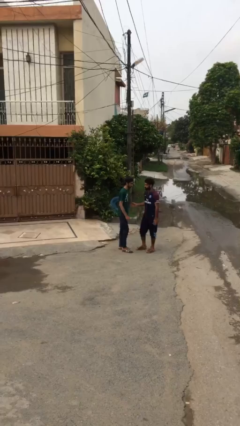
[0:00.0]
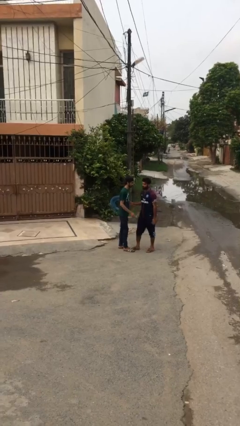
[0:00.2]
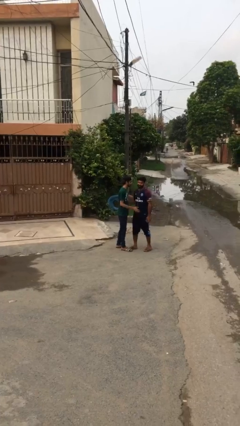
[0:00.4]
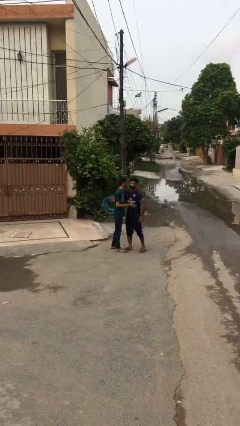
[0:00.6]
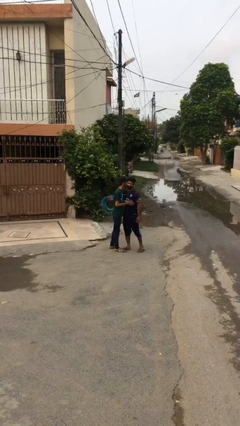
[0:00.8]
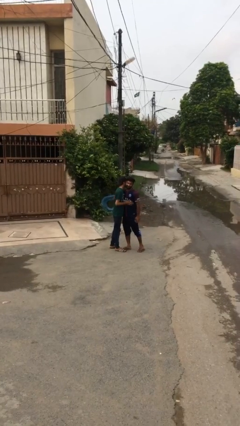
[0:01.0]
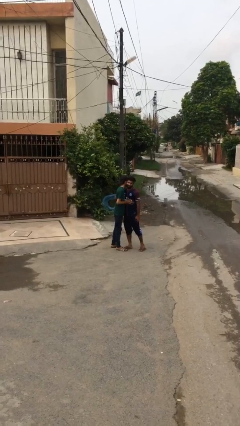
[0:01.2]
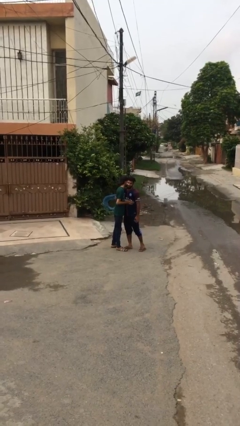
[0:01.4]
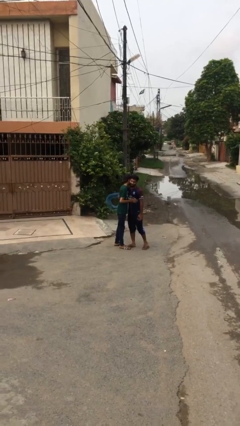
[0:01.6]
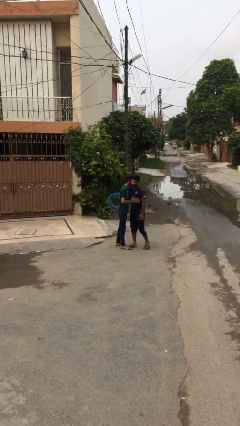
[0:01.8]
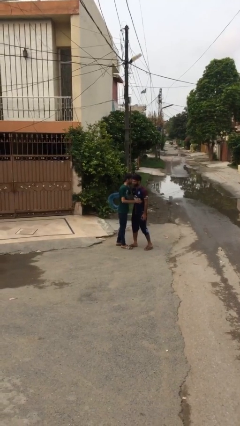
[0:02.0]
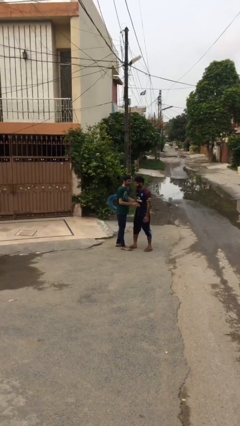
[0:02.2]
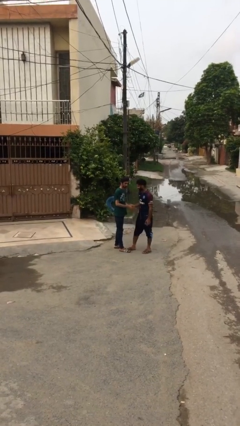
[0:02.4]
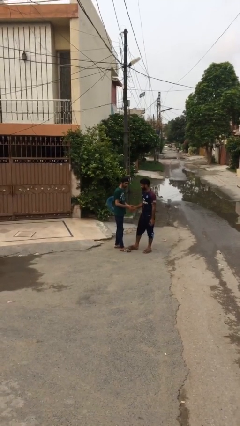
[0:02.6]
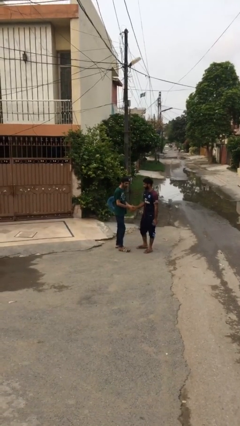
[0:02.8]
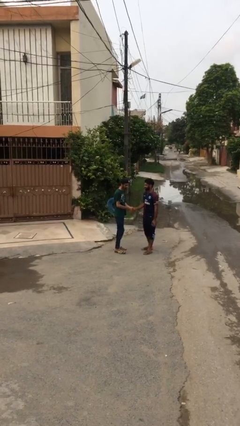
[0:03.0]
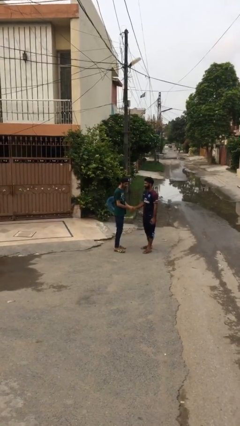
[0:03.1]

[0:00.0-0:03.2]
person embraces person

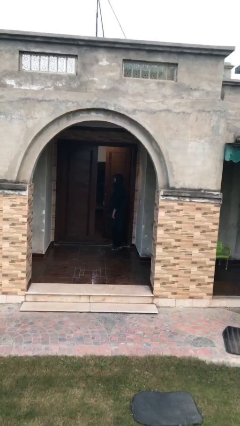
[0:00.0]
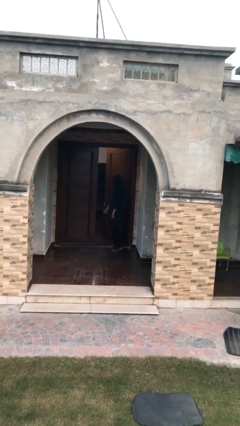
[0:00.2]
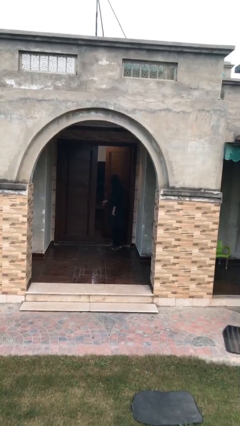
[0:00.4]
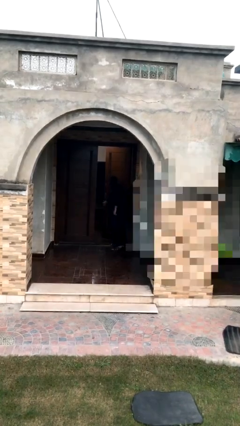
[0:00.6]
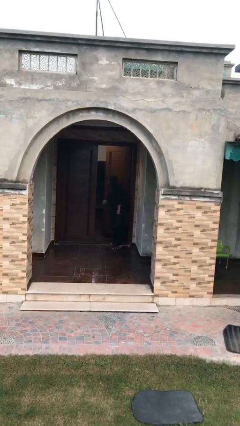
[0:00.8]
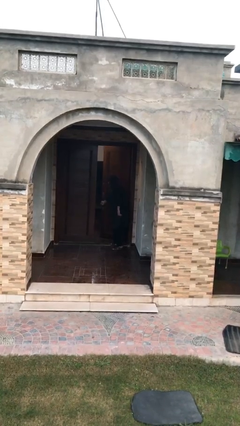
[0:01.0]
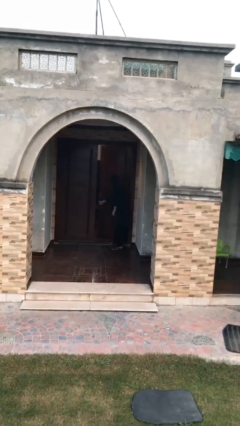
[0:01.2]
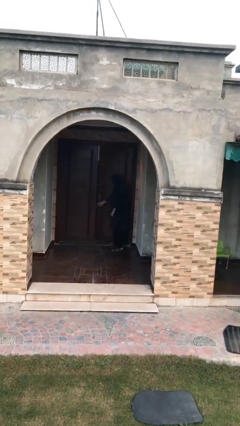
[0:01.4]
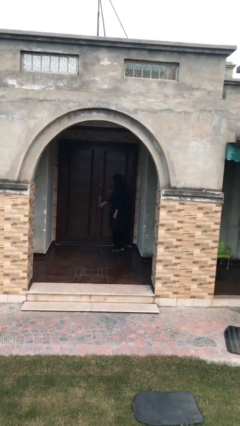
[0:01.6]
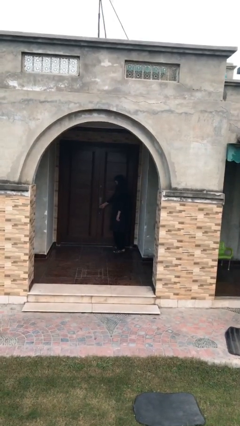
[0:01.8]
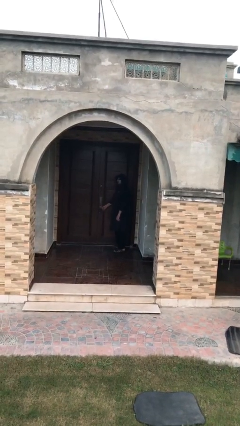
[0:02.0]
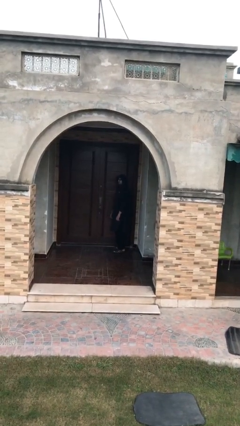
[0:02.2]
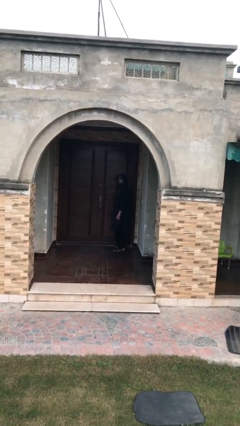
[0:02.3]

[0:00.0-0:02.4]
person closes facility door

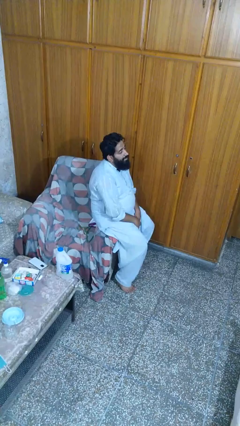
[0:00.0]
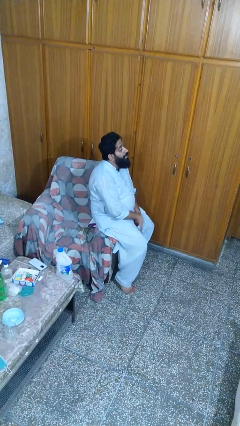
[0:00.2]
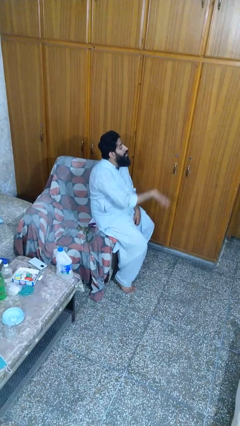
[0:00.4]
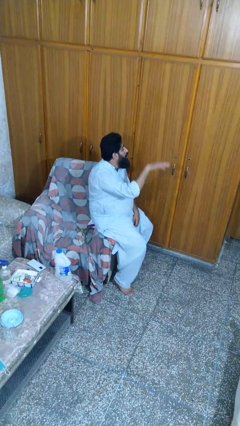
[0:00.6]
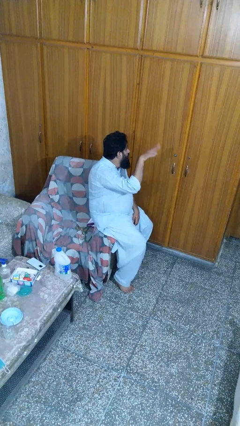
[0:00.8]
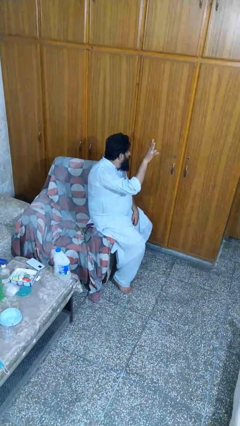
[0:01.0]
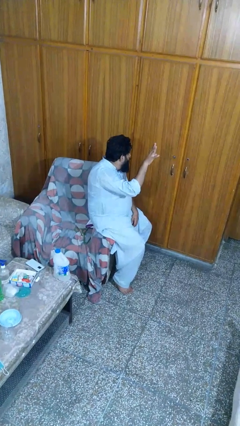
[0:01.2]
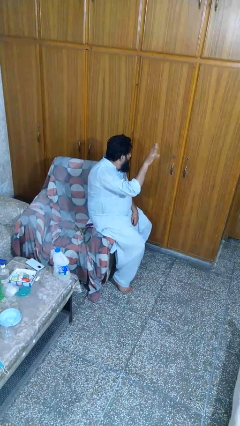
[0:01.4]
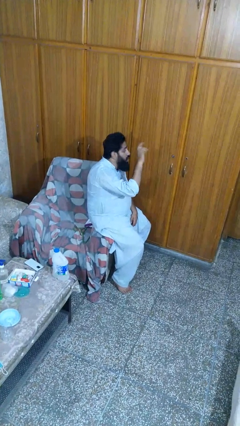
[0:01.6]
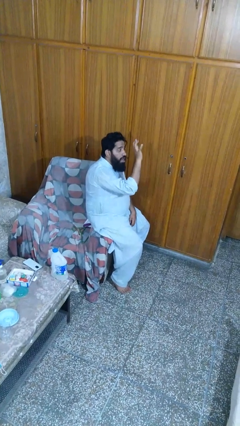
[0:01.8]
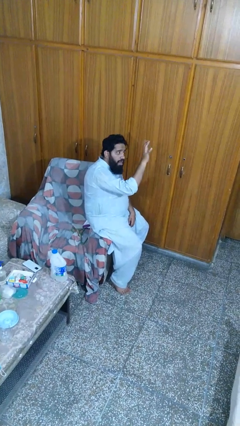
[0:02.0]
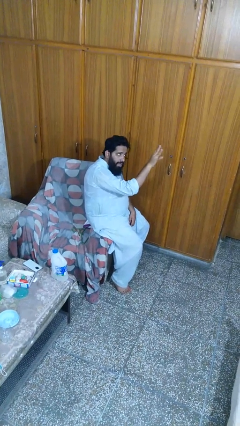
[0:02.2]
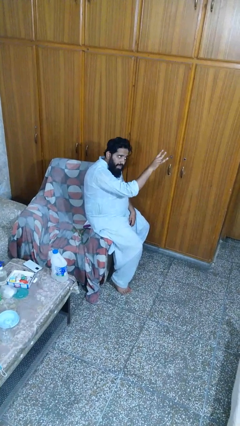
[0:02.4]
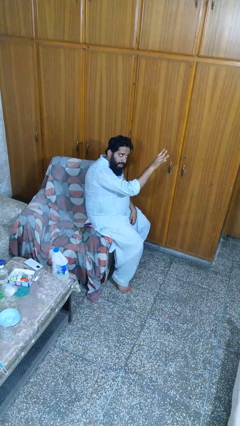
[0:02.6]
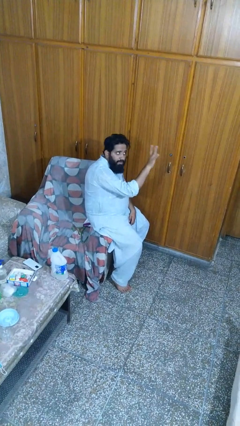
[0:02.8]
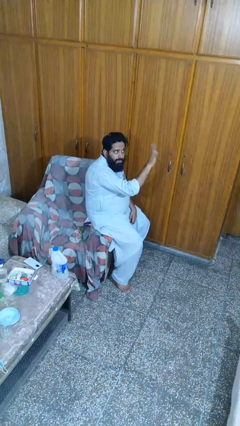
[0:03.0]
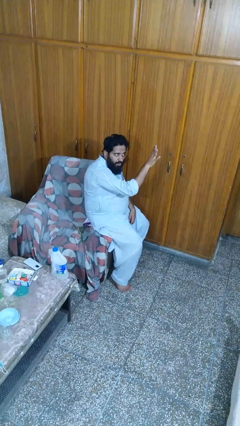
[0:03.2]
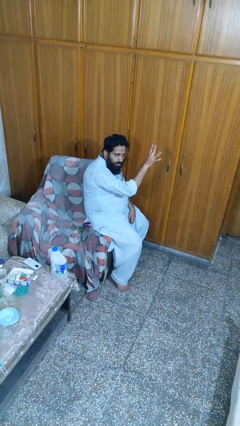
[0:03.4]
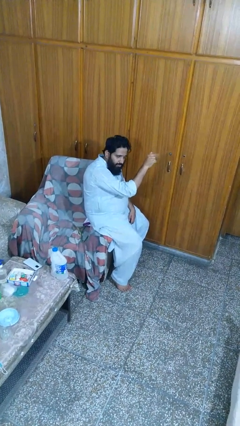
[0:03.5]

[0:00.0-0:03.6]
person waves at person

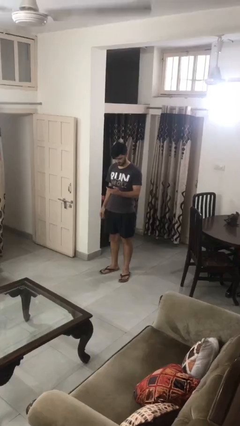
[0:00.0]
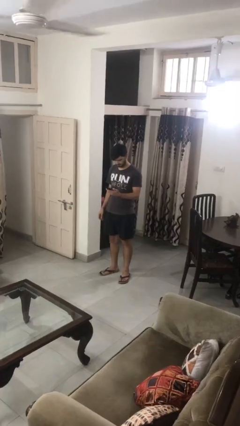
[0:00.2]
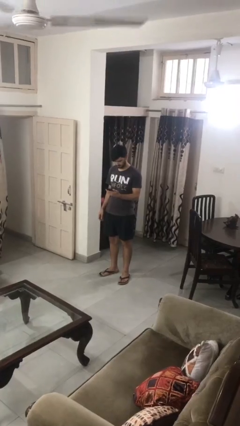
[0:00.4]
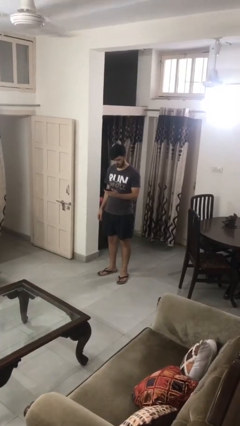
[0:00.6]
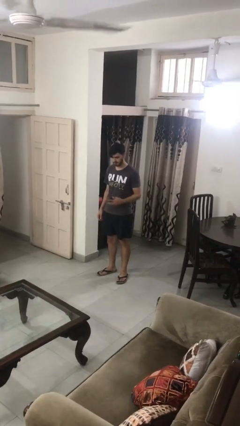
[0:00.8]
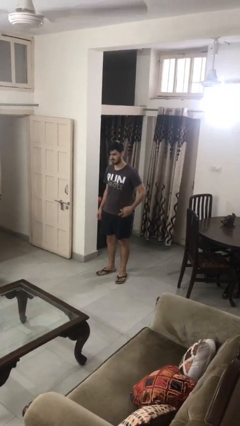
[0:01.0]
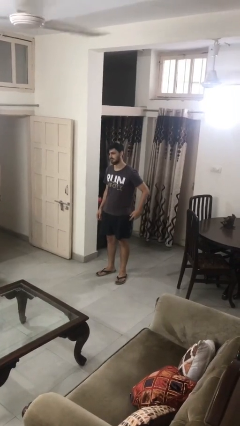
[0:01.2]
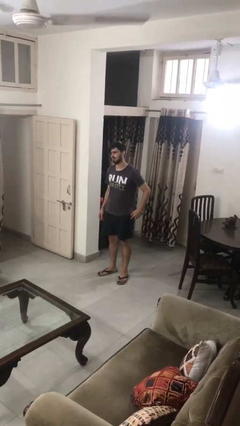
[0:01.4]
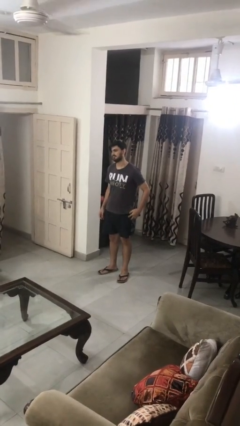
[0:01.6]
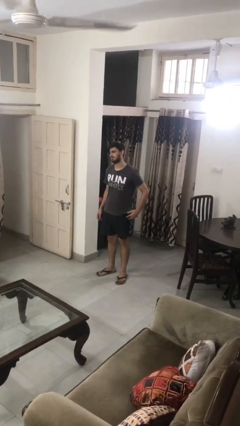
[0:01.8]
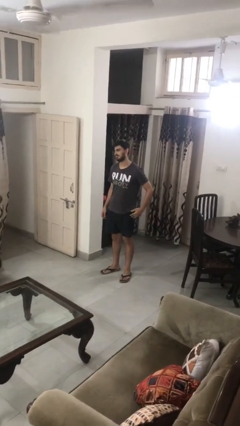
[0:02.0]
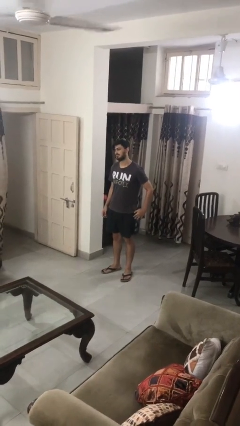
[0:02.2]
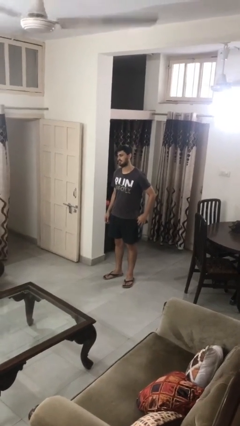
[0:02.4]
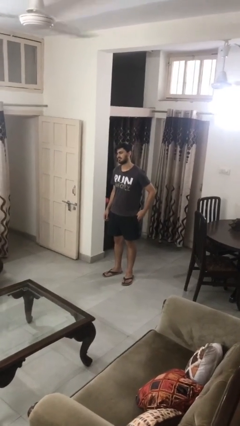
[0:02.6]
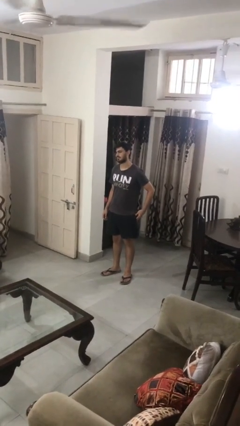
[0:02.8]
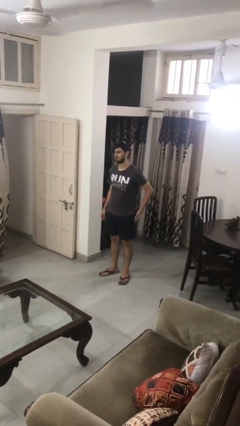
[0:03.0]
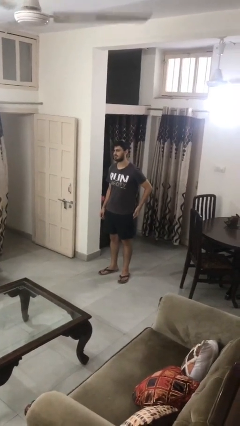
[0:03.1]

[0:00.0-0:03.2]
person puts phone into pocket

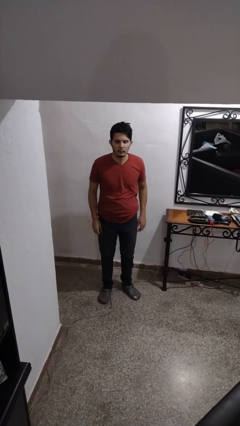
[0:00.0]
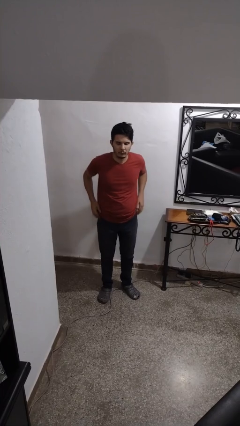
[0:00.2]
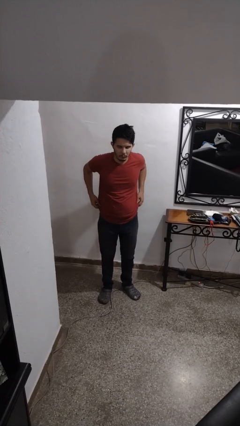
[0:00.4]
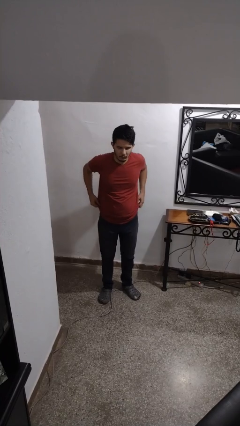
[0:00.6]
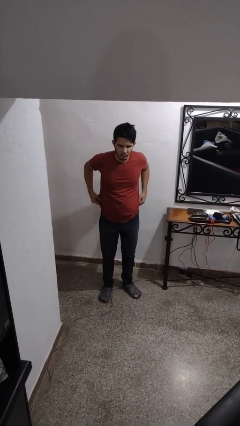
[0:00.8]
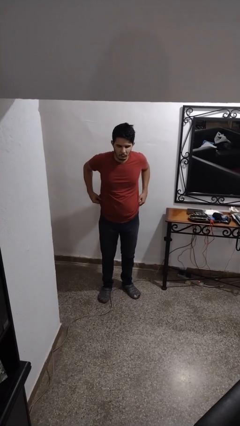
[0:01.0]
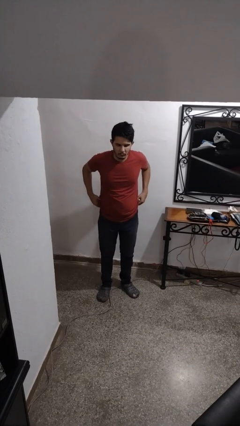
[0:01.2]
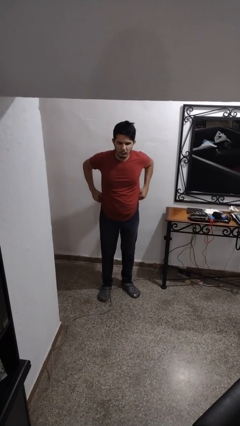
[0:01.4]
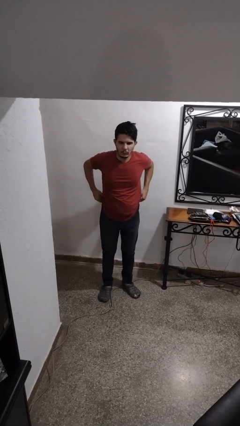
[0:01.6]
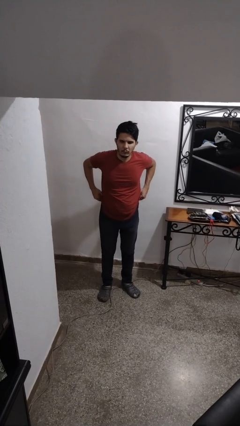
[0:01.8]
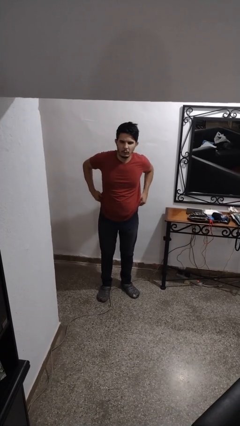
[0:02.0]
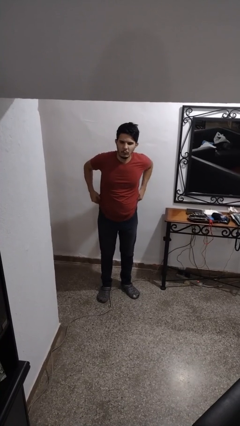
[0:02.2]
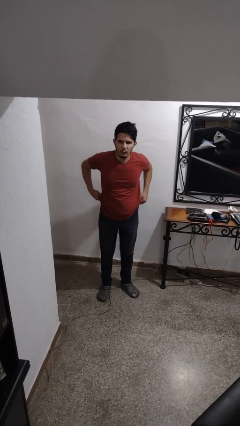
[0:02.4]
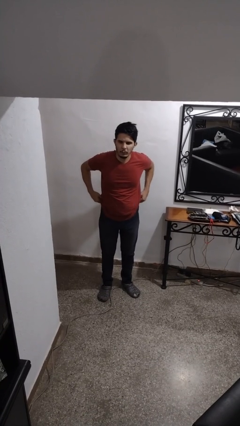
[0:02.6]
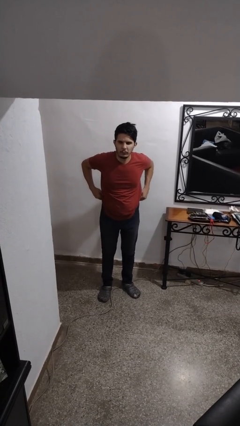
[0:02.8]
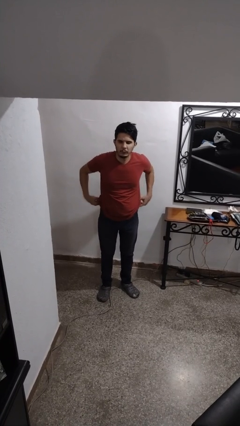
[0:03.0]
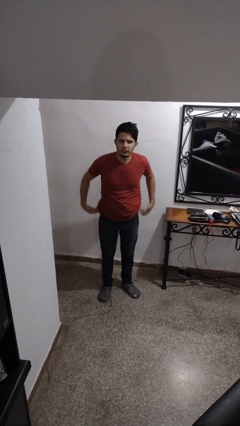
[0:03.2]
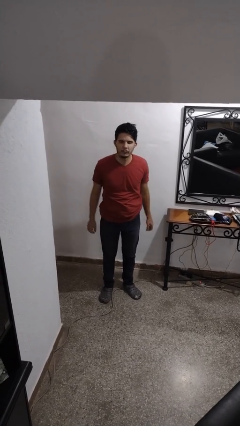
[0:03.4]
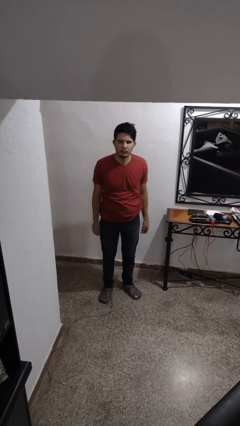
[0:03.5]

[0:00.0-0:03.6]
person hikes up pants

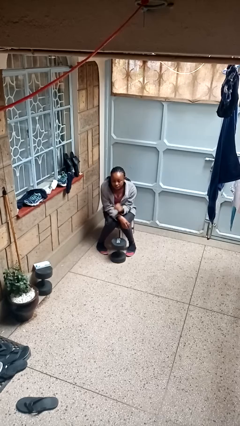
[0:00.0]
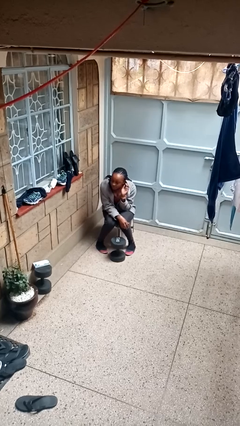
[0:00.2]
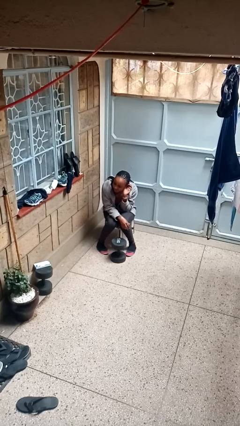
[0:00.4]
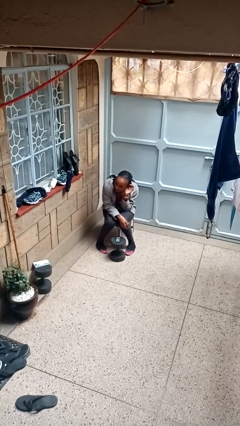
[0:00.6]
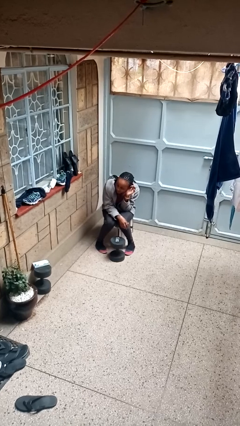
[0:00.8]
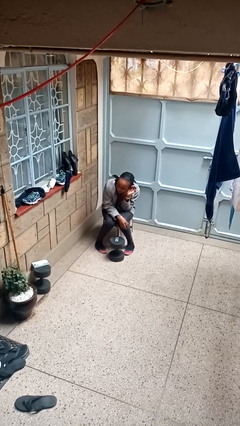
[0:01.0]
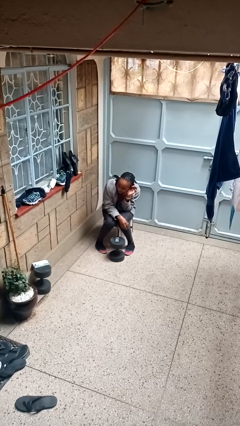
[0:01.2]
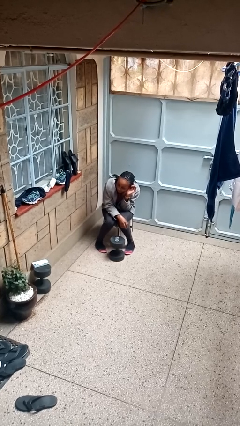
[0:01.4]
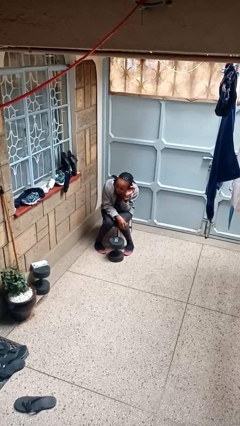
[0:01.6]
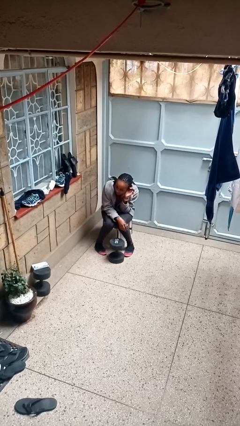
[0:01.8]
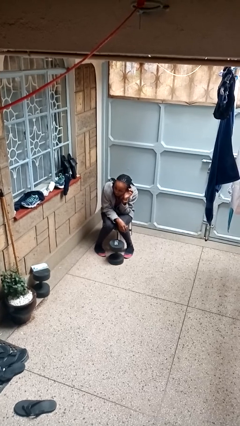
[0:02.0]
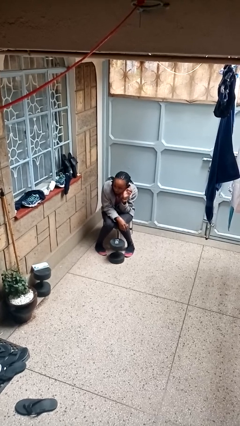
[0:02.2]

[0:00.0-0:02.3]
person gestures listen closely
